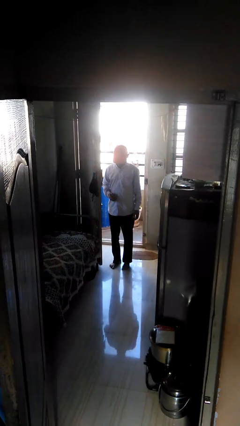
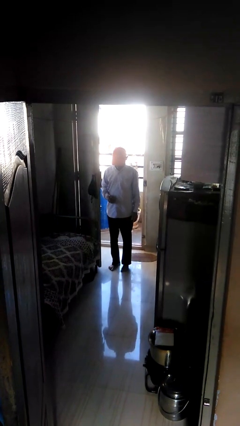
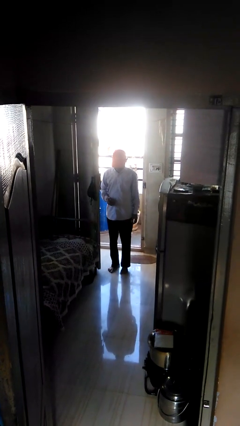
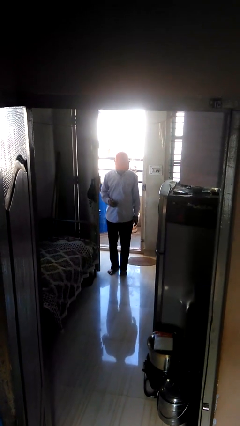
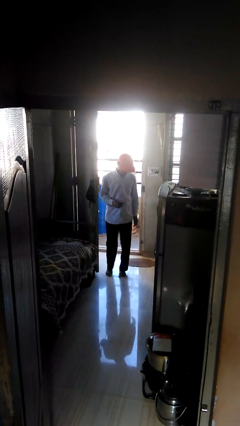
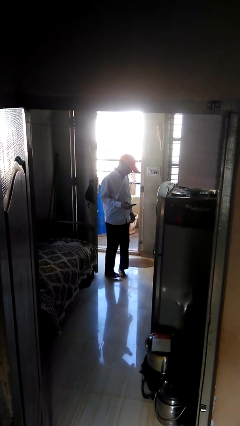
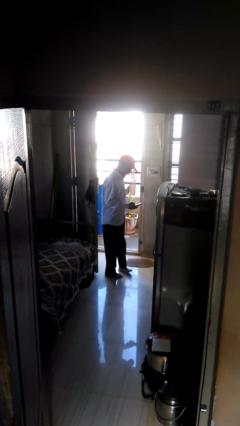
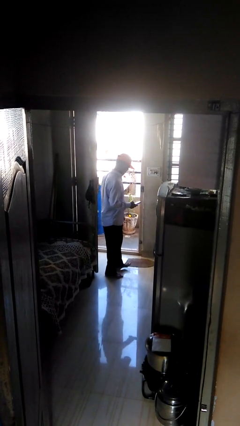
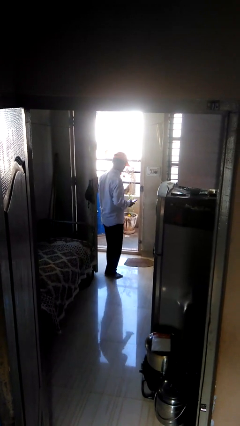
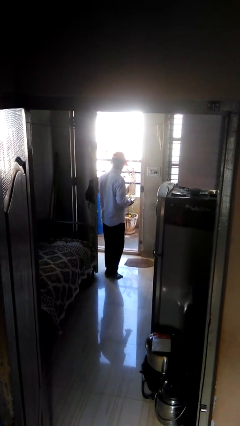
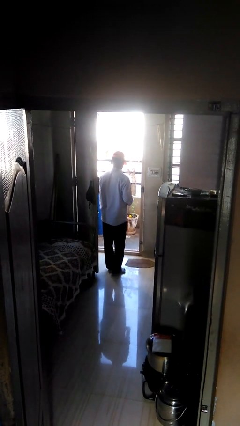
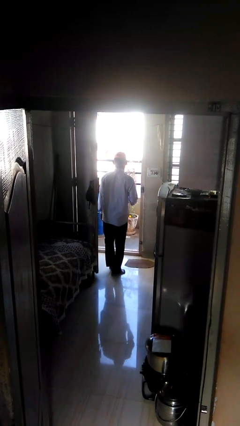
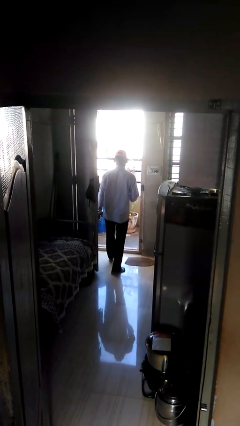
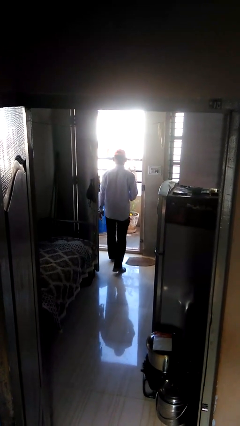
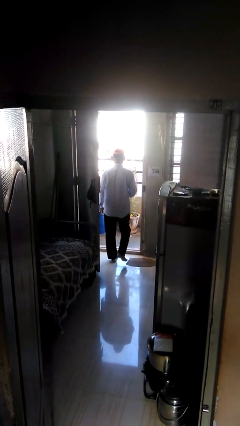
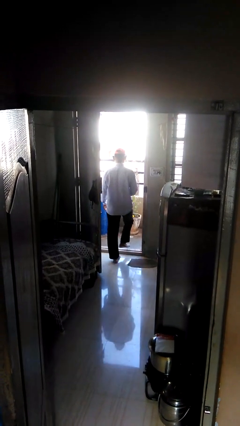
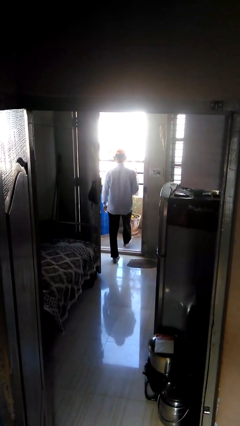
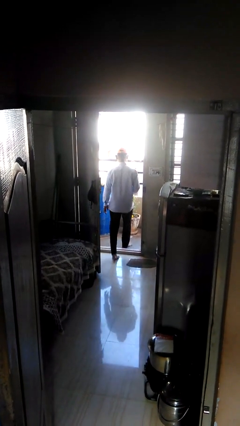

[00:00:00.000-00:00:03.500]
person exits scene through structure

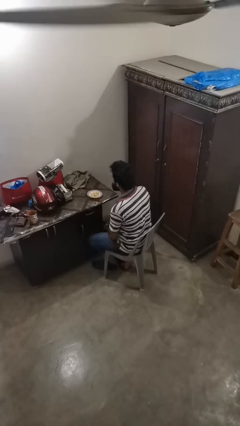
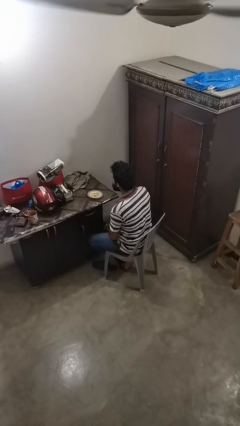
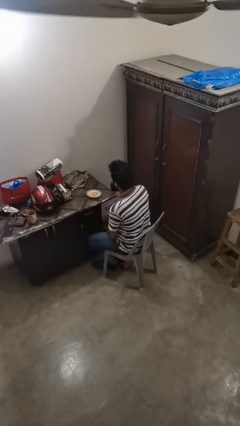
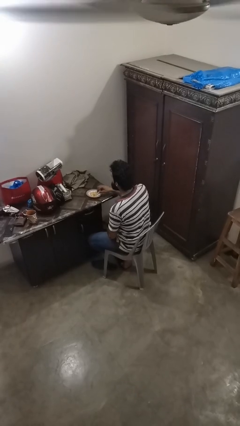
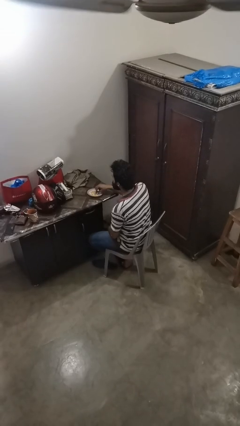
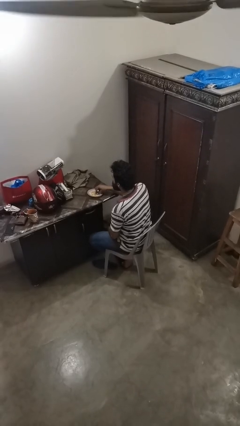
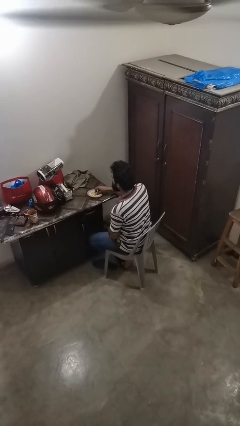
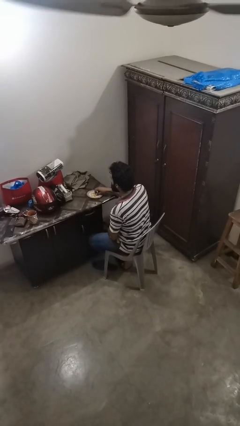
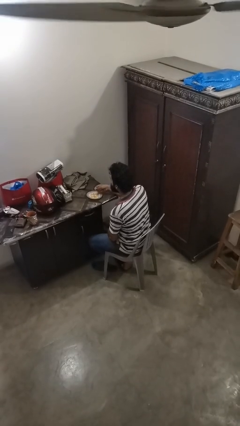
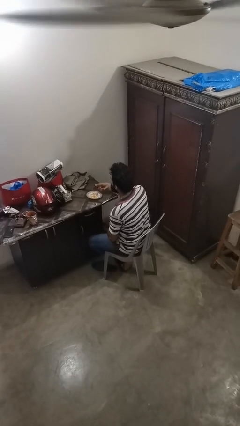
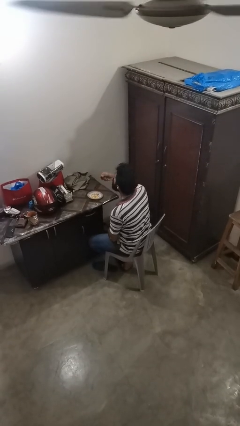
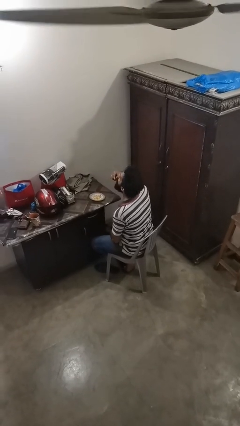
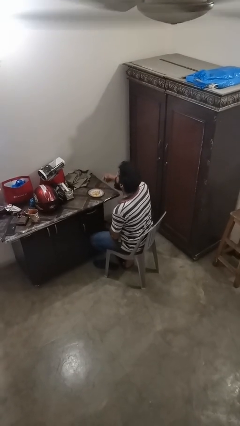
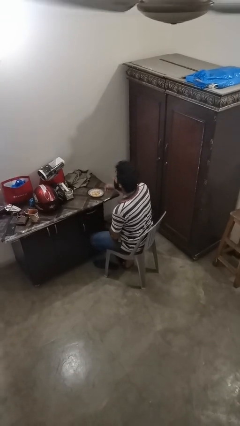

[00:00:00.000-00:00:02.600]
person eats with hands

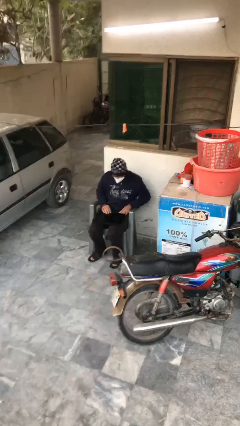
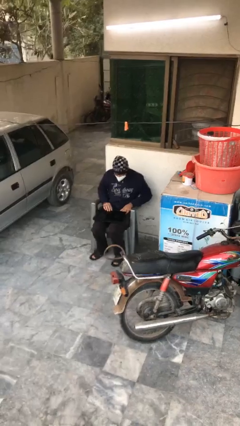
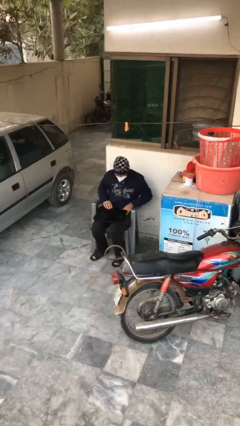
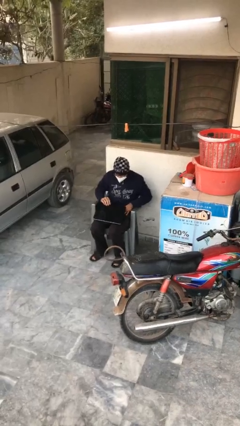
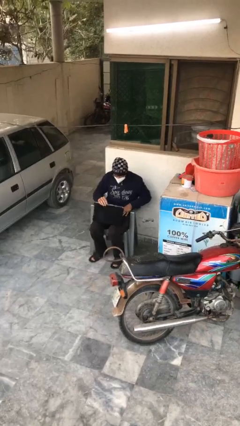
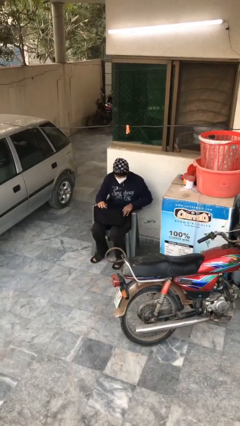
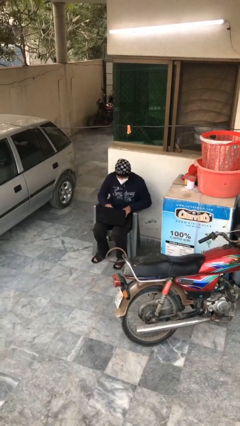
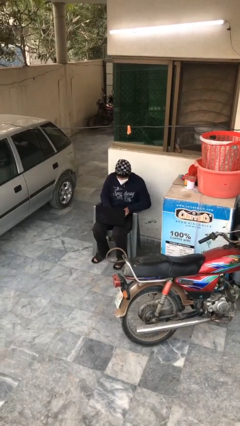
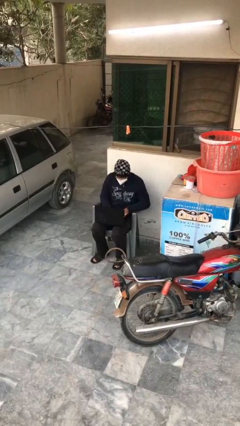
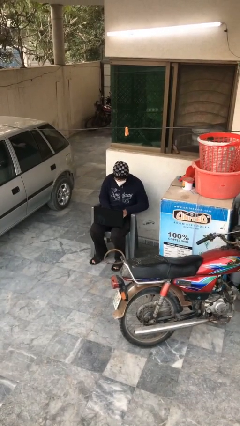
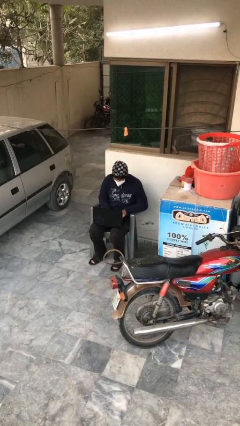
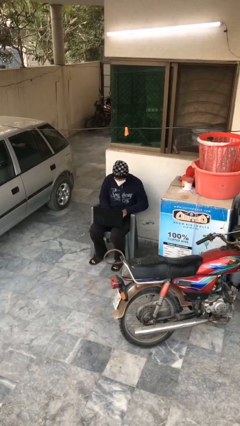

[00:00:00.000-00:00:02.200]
person interacts with laptop

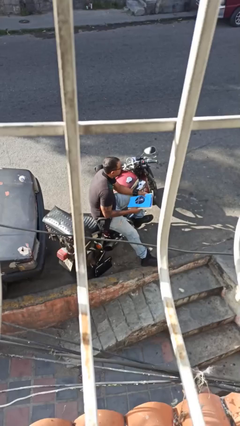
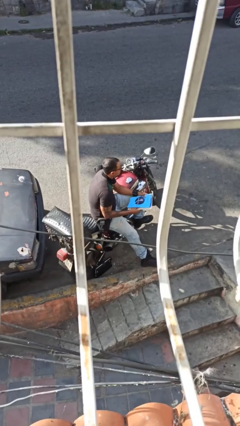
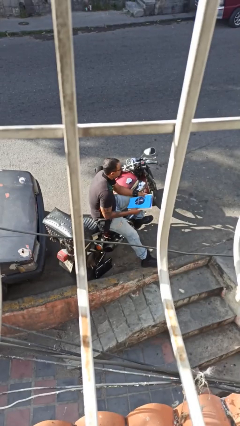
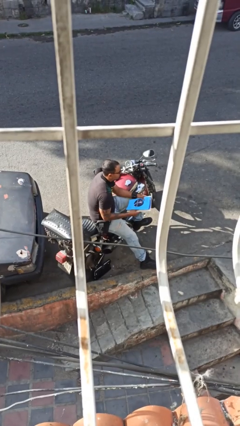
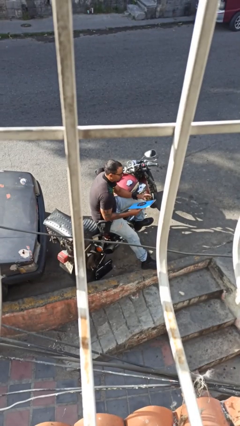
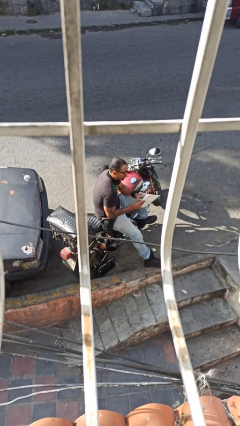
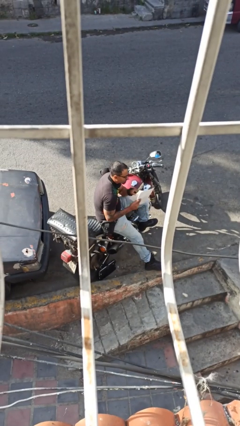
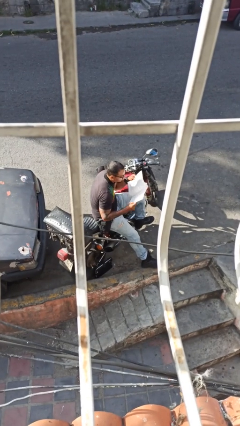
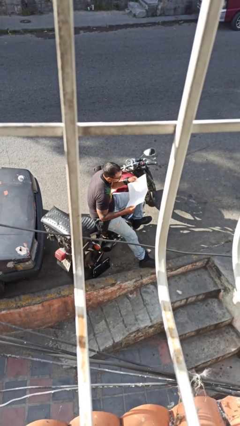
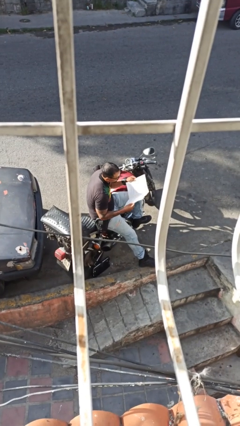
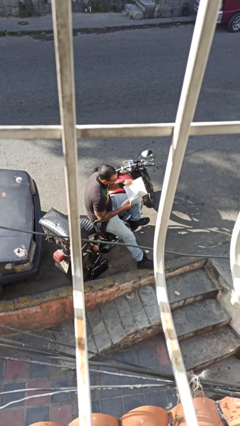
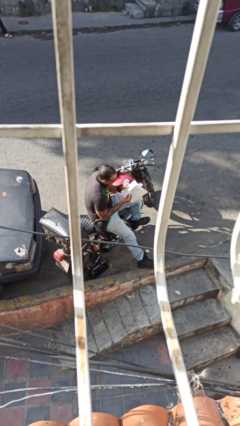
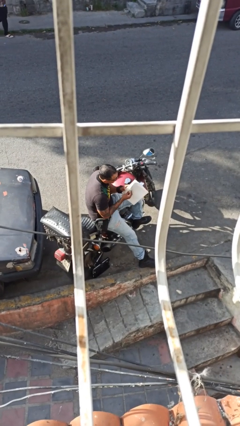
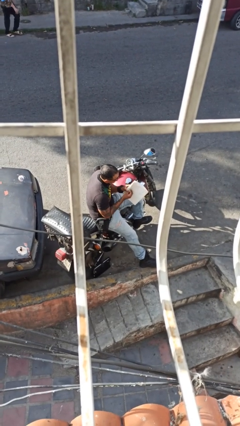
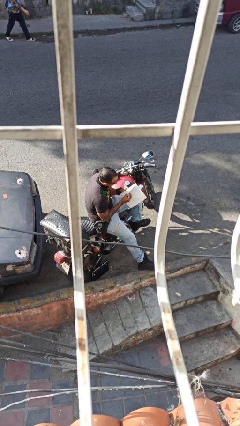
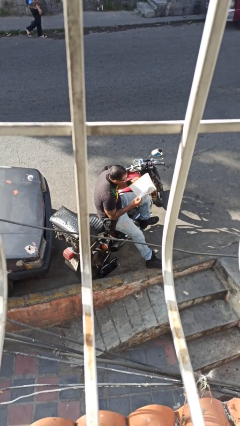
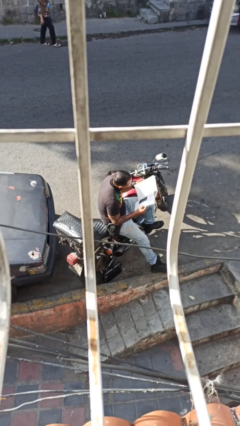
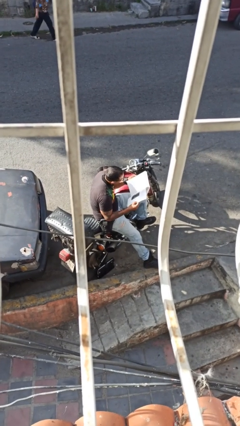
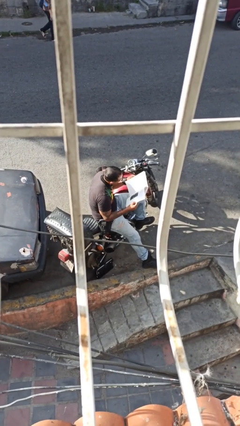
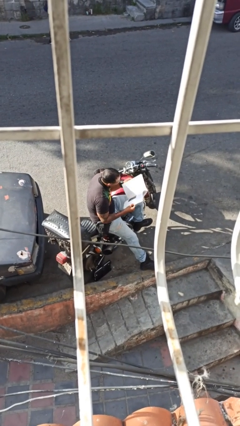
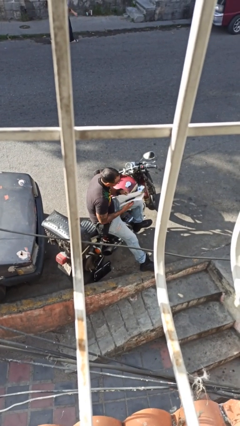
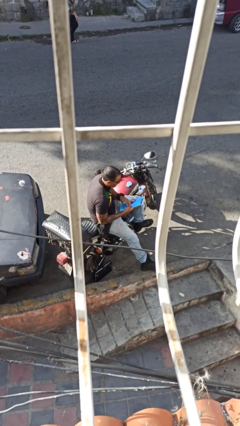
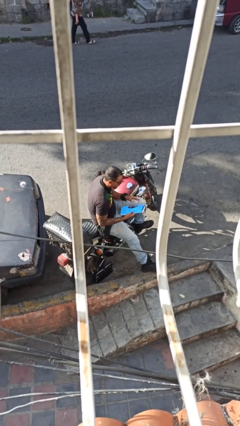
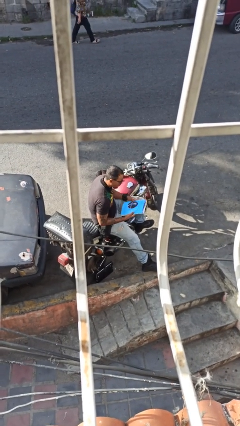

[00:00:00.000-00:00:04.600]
person reads document

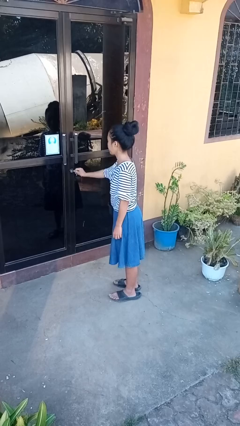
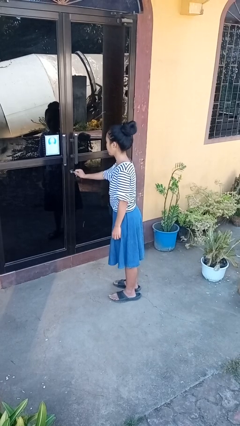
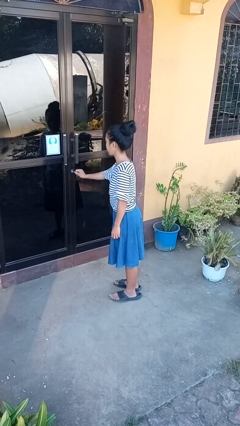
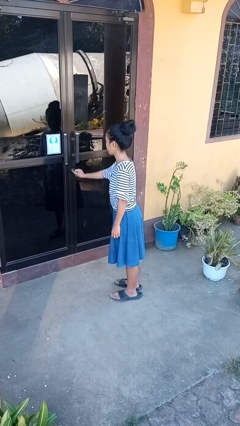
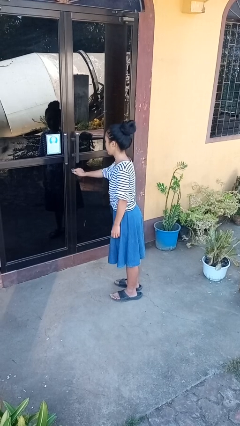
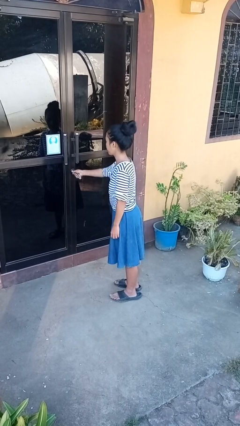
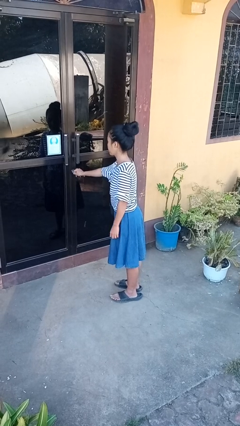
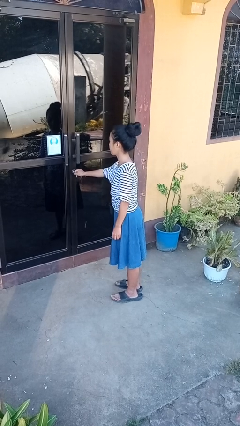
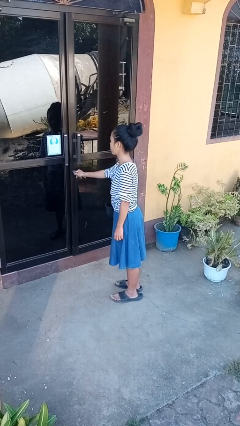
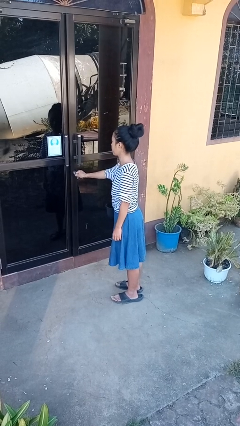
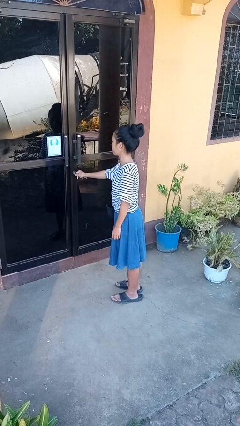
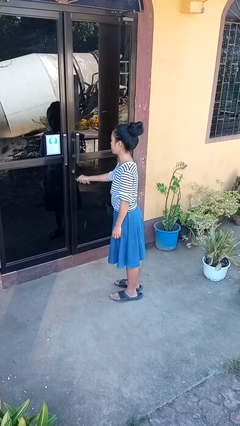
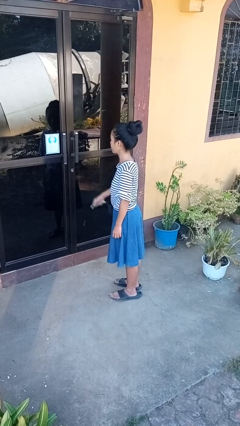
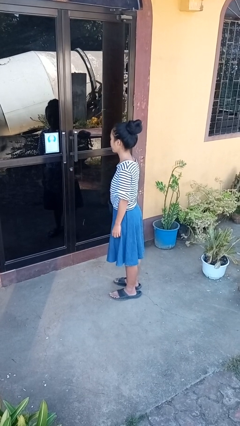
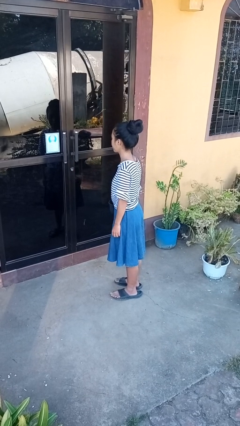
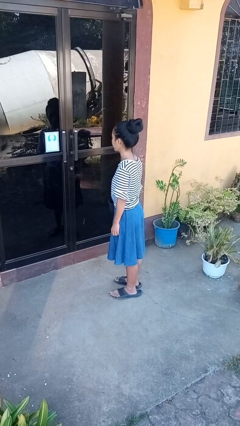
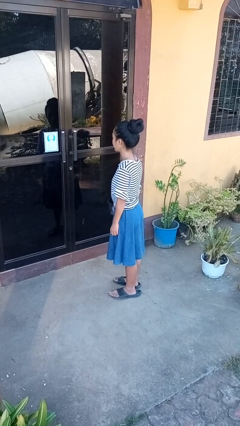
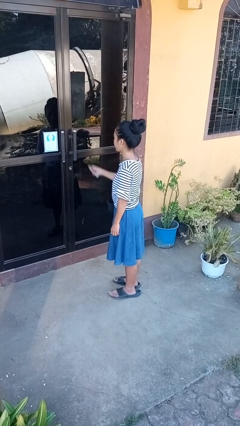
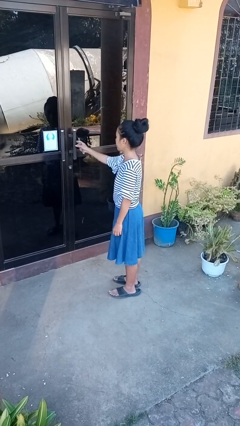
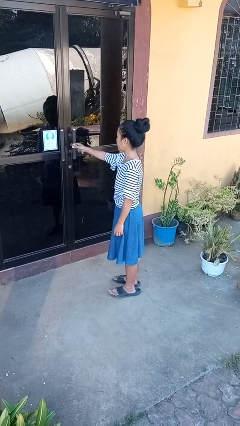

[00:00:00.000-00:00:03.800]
person unlocks door with keys

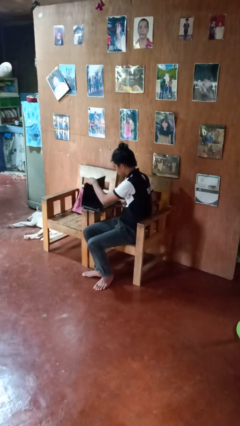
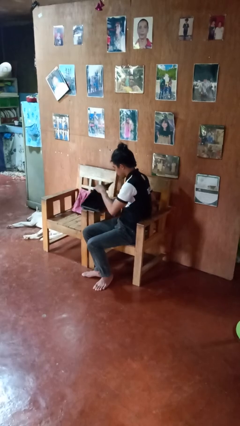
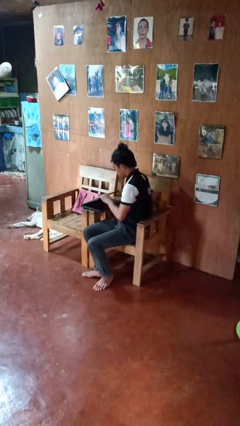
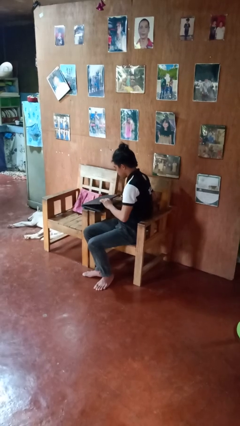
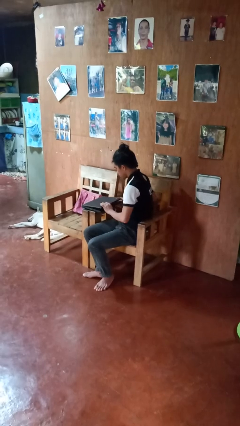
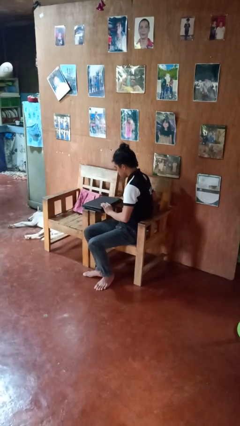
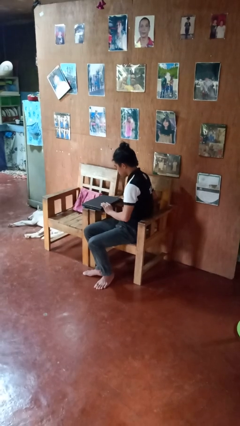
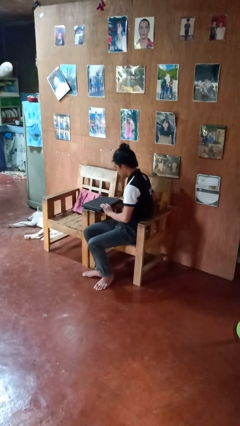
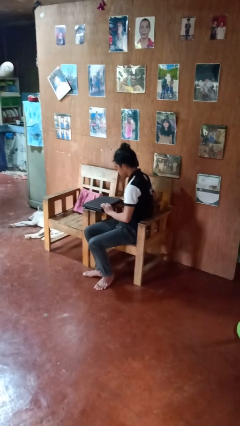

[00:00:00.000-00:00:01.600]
person closes laptop
